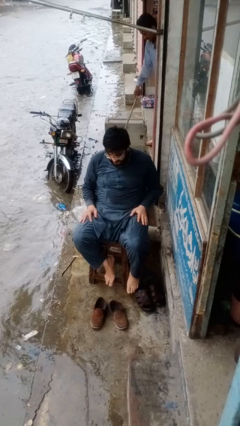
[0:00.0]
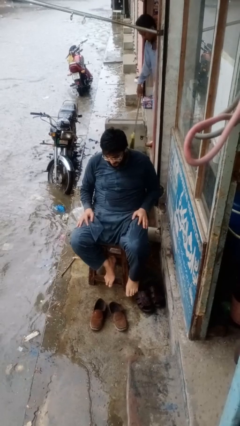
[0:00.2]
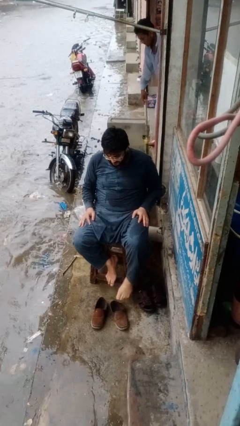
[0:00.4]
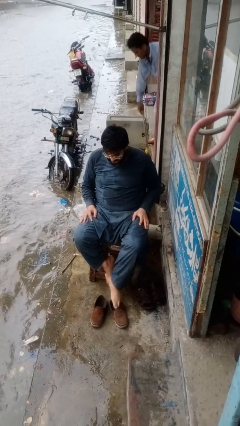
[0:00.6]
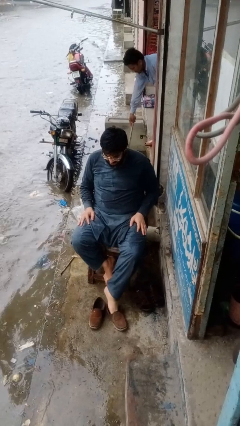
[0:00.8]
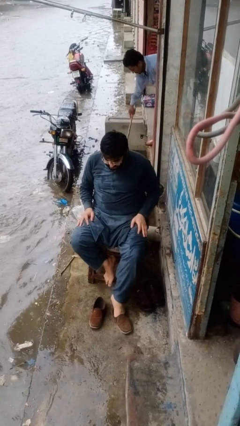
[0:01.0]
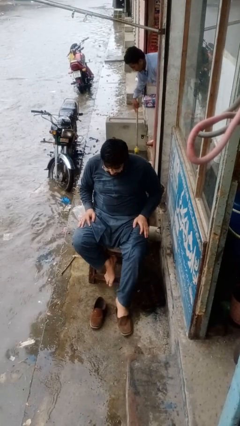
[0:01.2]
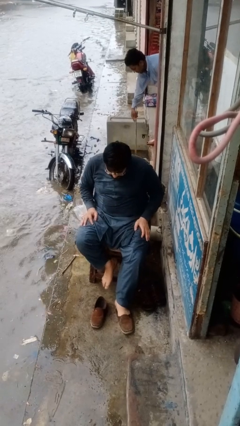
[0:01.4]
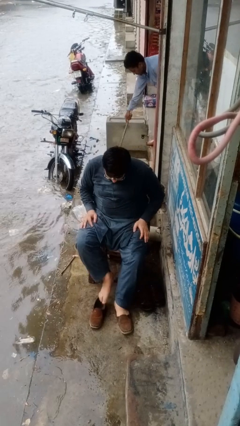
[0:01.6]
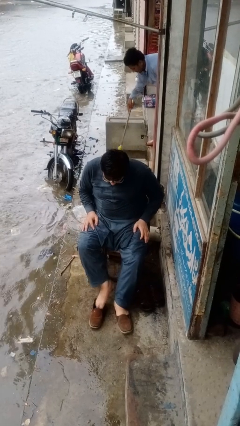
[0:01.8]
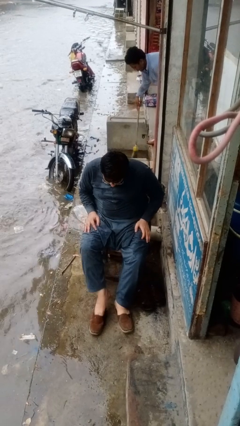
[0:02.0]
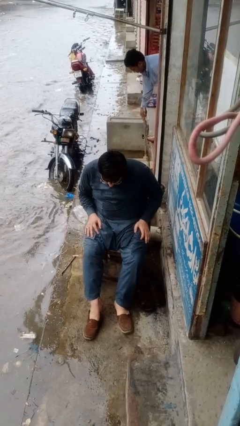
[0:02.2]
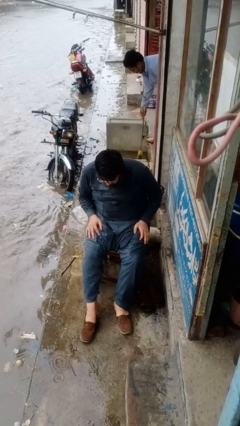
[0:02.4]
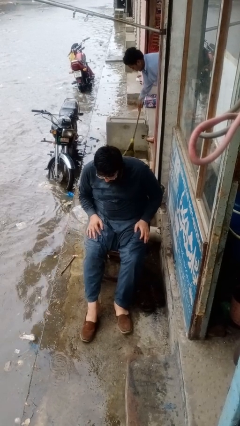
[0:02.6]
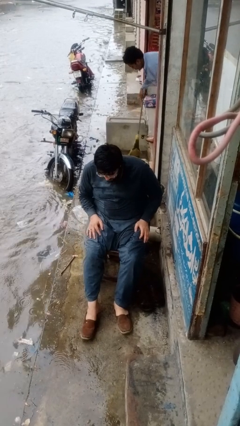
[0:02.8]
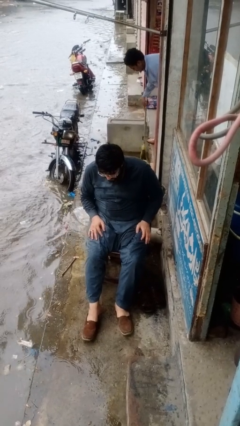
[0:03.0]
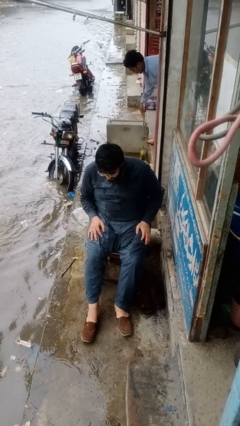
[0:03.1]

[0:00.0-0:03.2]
person puts on shoes

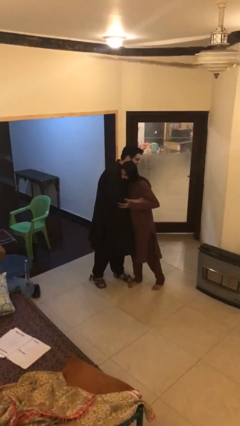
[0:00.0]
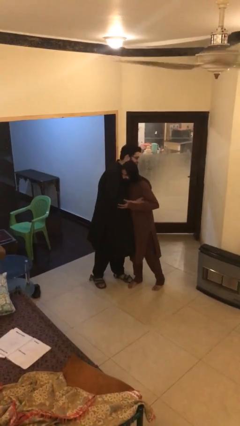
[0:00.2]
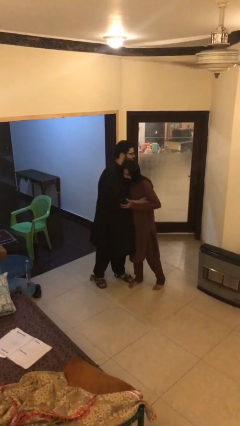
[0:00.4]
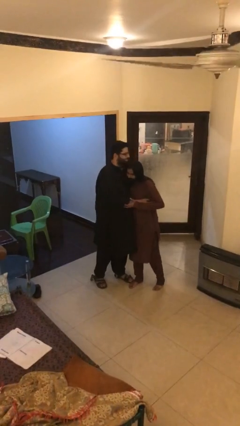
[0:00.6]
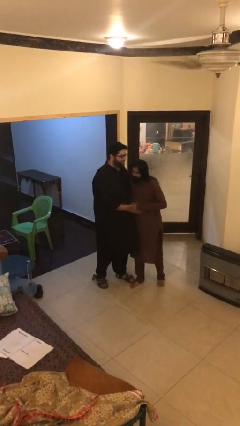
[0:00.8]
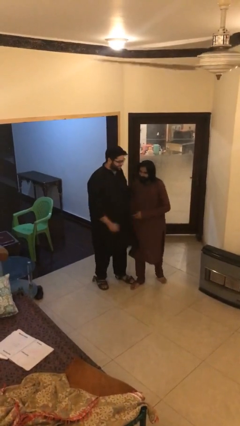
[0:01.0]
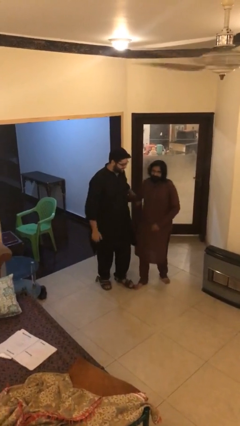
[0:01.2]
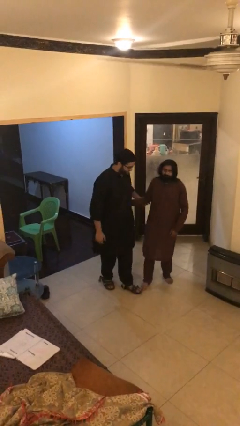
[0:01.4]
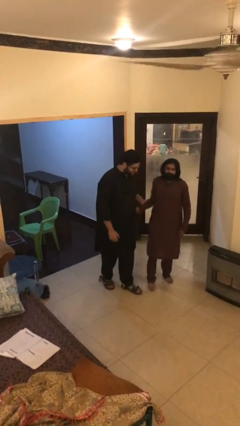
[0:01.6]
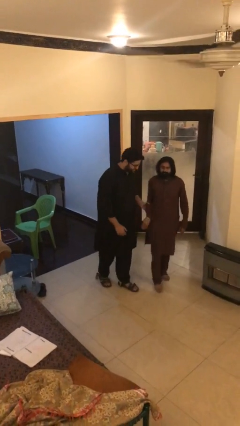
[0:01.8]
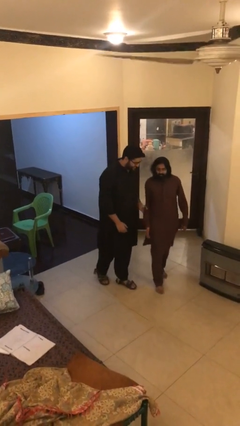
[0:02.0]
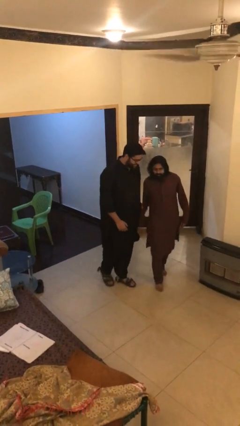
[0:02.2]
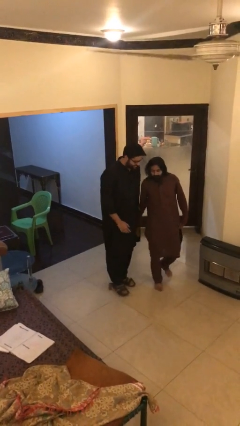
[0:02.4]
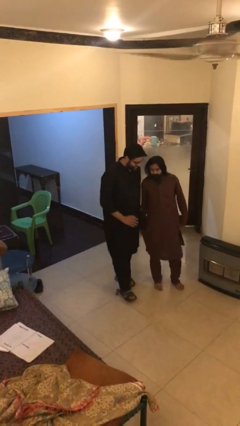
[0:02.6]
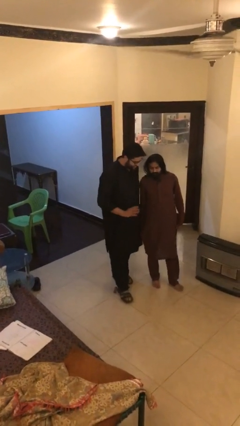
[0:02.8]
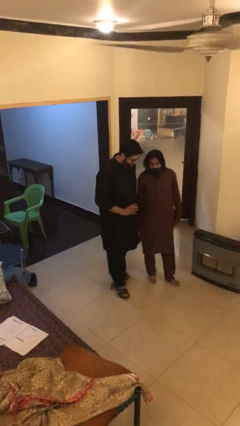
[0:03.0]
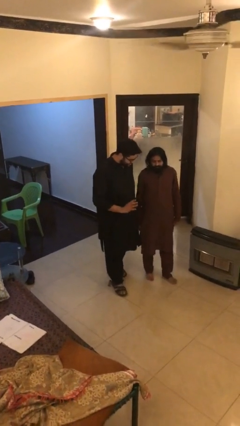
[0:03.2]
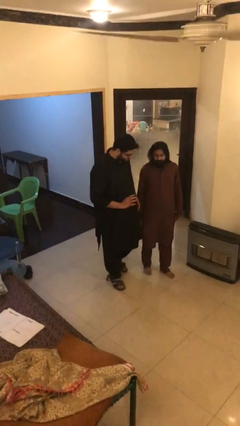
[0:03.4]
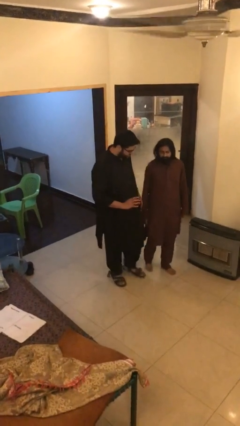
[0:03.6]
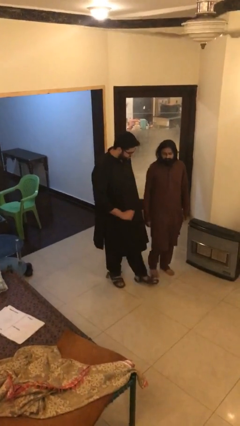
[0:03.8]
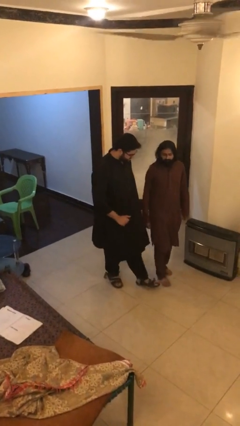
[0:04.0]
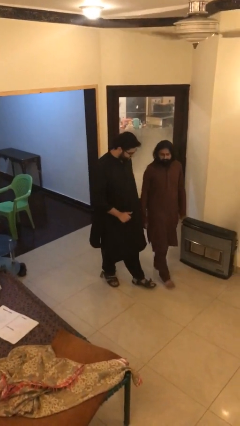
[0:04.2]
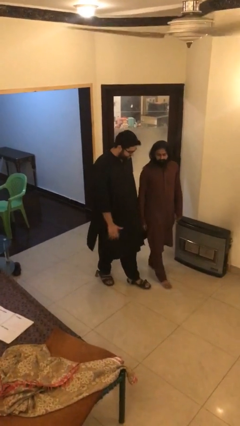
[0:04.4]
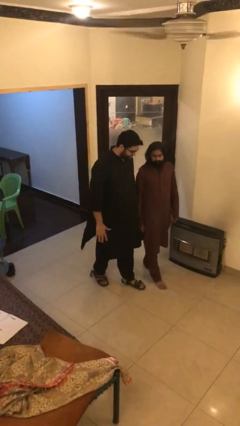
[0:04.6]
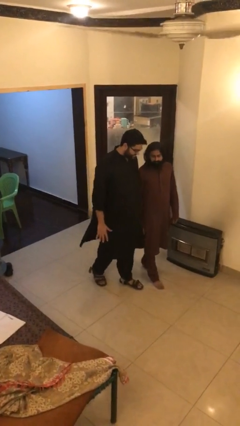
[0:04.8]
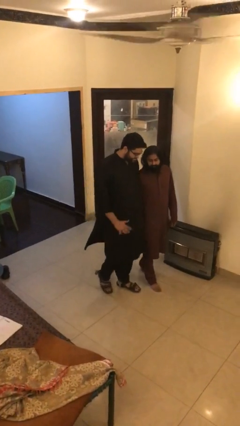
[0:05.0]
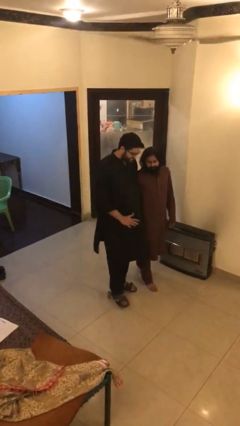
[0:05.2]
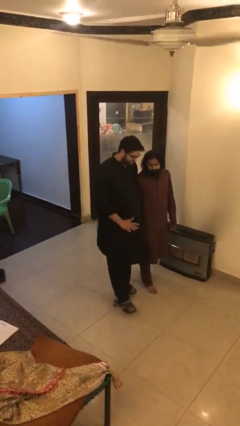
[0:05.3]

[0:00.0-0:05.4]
person talks to person

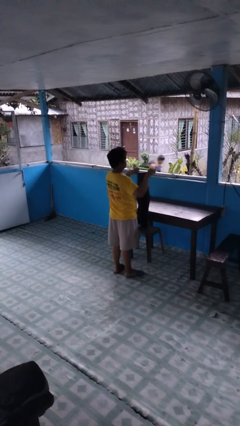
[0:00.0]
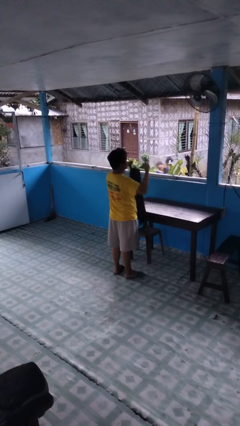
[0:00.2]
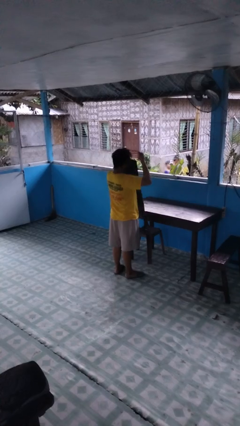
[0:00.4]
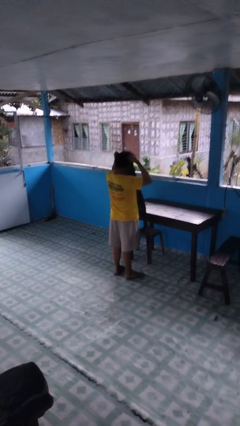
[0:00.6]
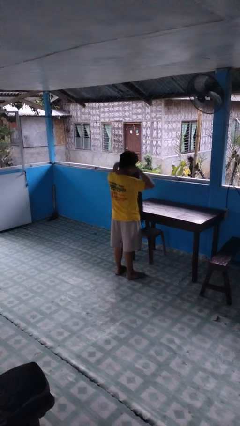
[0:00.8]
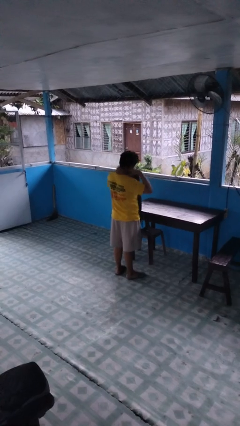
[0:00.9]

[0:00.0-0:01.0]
person puts on apron

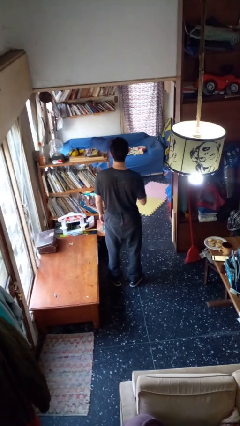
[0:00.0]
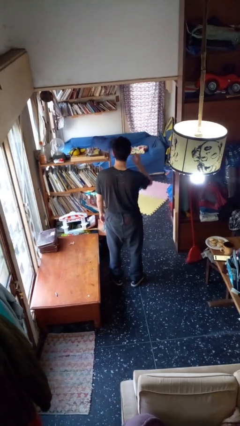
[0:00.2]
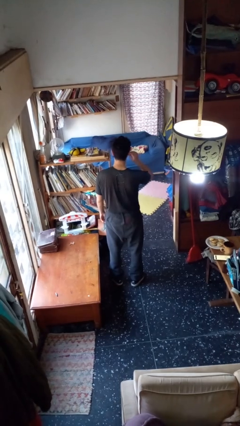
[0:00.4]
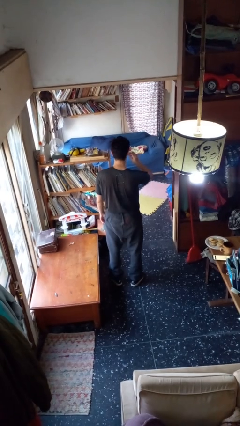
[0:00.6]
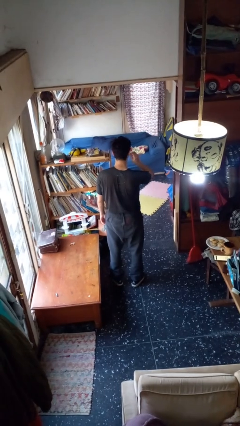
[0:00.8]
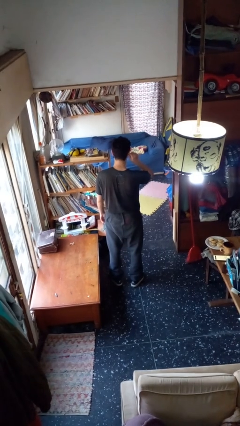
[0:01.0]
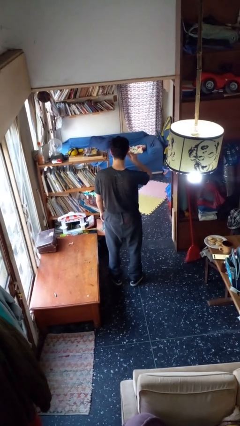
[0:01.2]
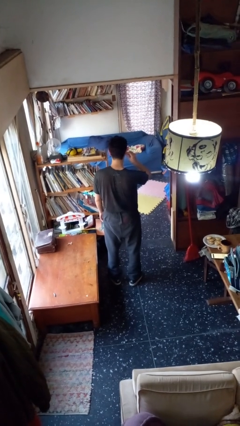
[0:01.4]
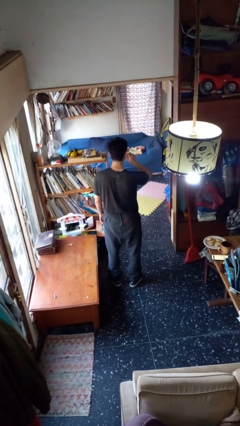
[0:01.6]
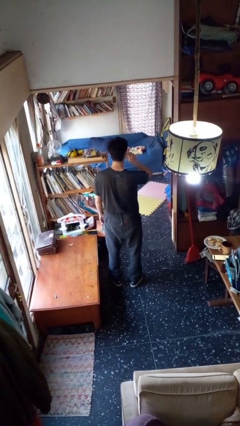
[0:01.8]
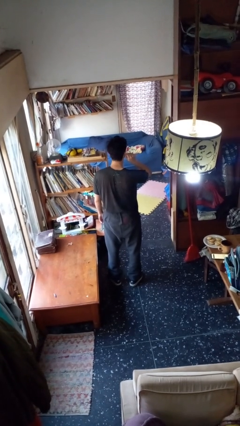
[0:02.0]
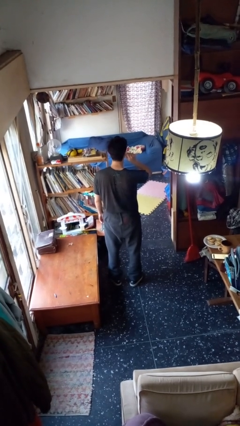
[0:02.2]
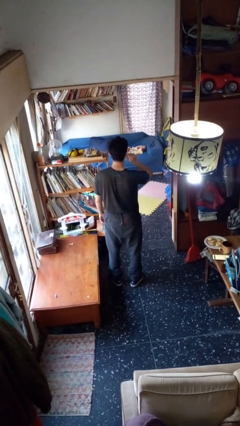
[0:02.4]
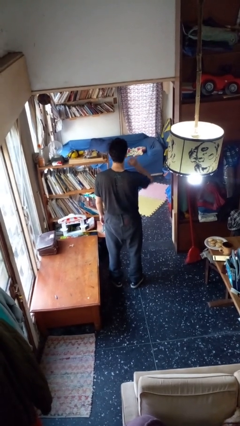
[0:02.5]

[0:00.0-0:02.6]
person touches earlobe

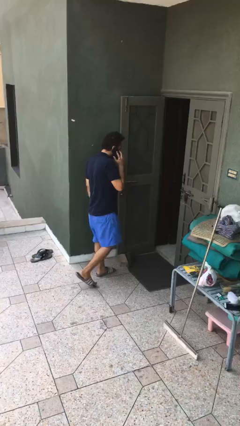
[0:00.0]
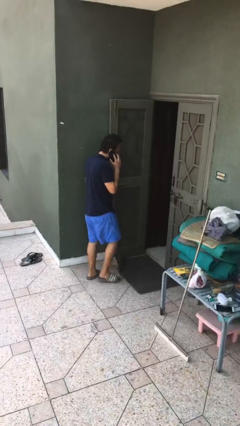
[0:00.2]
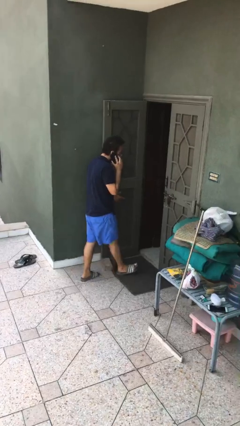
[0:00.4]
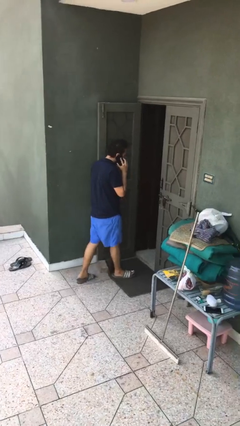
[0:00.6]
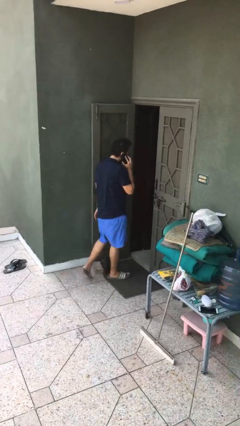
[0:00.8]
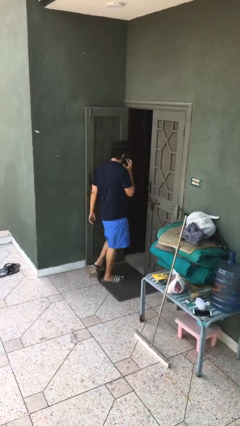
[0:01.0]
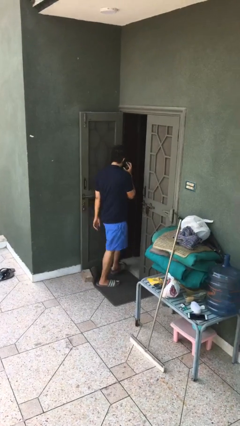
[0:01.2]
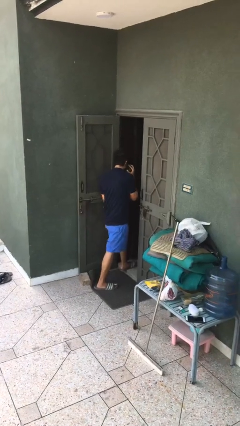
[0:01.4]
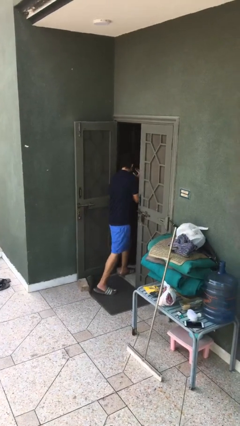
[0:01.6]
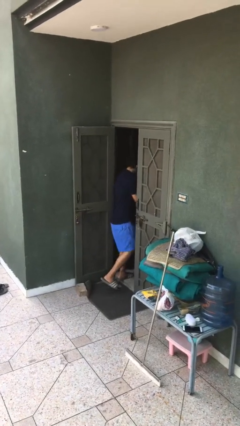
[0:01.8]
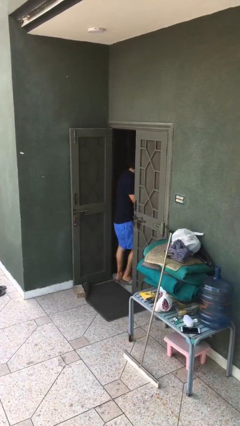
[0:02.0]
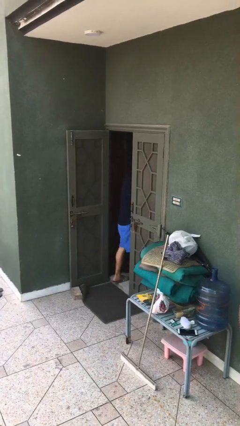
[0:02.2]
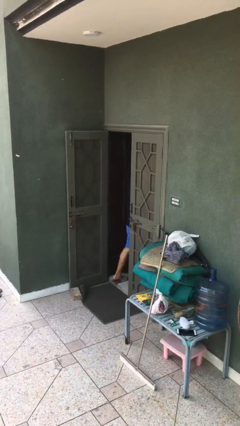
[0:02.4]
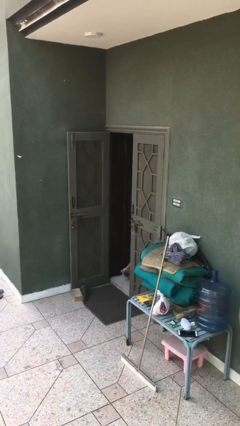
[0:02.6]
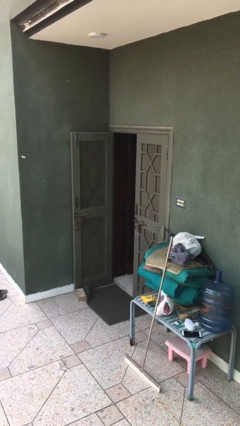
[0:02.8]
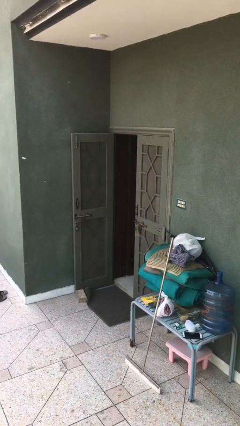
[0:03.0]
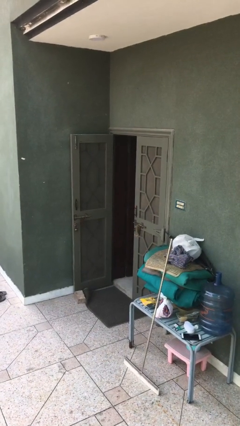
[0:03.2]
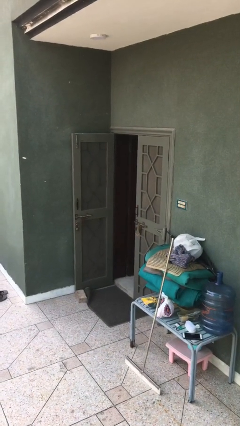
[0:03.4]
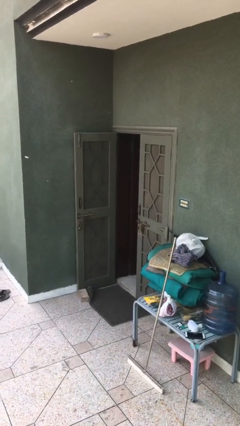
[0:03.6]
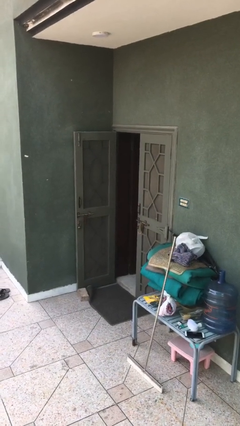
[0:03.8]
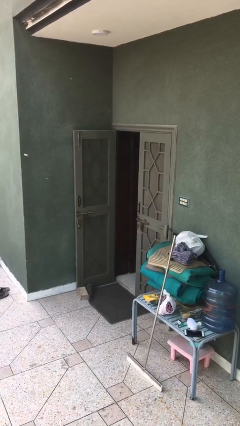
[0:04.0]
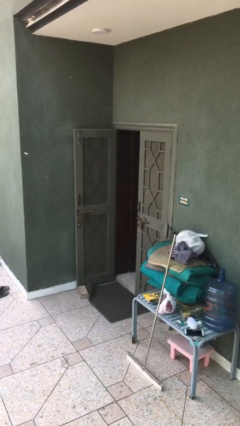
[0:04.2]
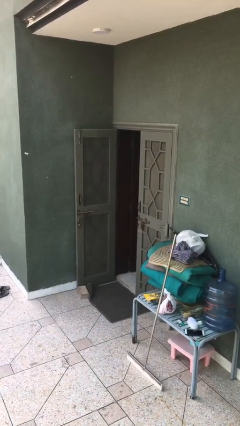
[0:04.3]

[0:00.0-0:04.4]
person exits scene through structure

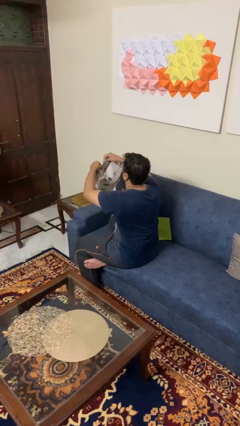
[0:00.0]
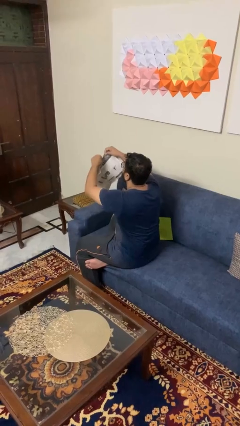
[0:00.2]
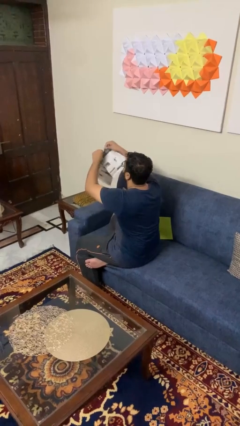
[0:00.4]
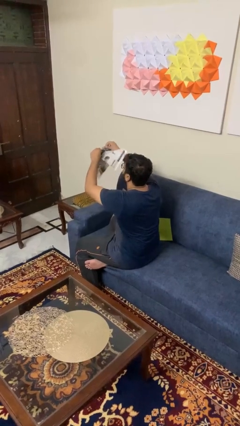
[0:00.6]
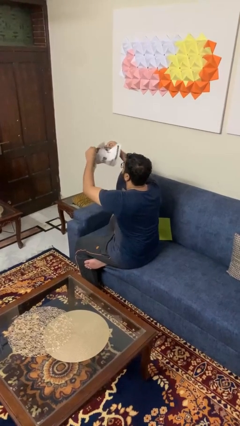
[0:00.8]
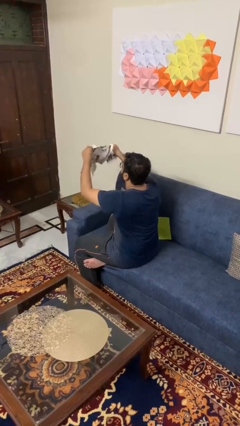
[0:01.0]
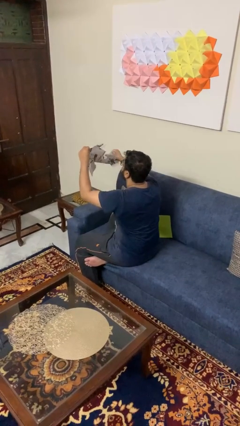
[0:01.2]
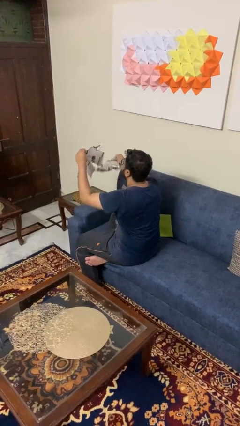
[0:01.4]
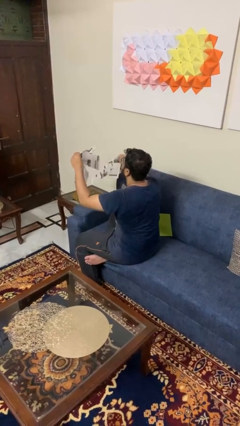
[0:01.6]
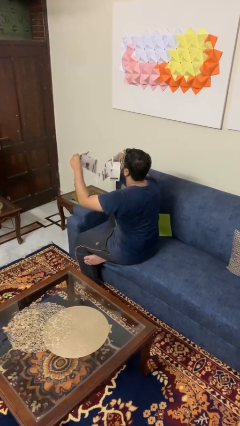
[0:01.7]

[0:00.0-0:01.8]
person tears paper
